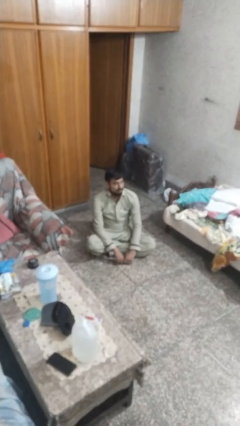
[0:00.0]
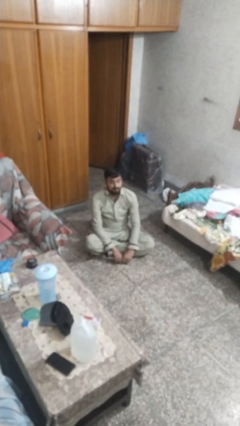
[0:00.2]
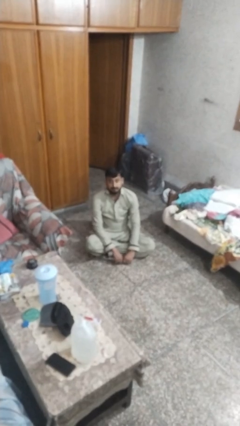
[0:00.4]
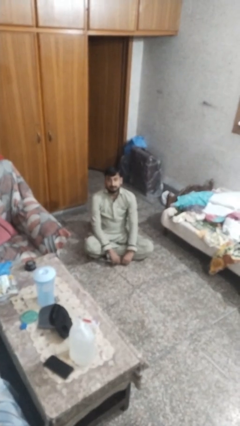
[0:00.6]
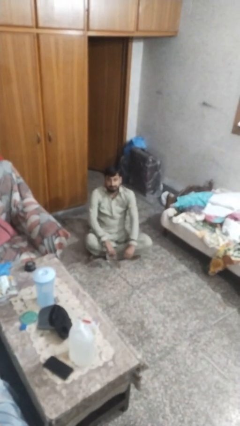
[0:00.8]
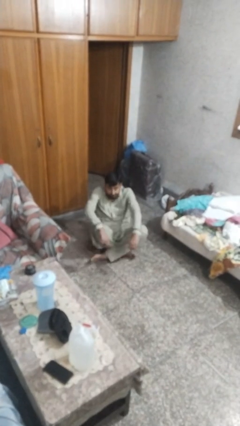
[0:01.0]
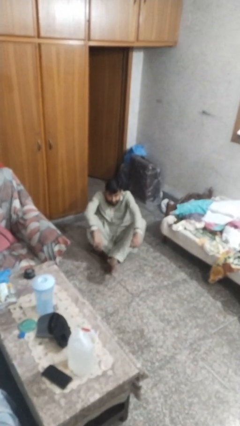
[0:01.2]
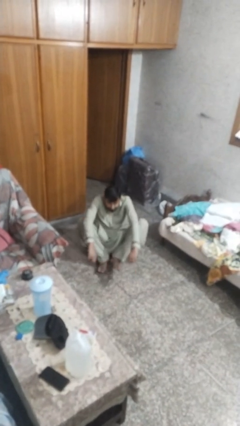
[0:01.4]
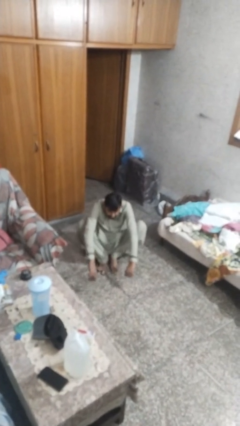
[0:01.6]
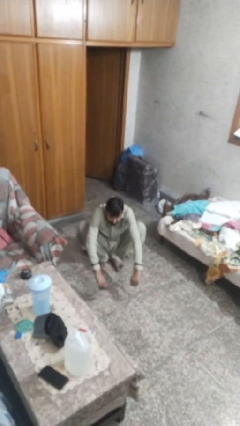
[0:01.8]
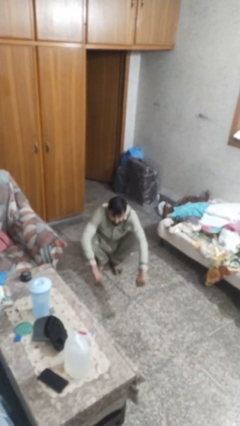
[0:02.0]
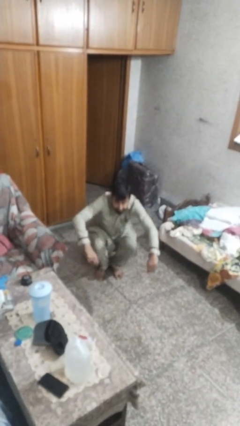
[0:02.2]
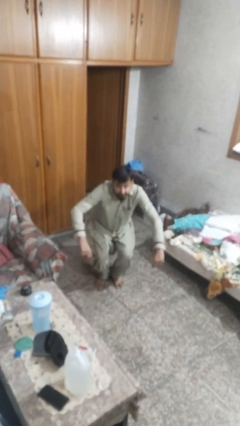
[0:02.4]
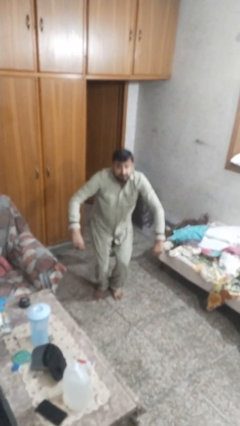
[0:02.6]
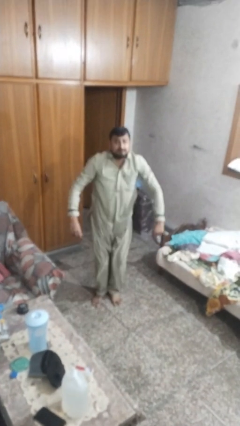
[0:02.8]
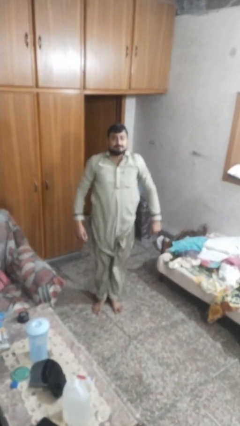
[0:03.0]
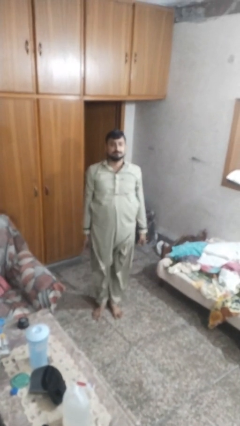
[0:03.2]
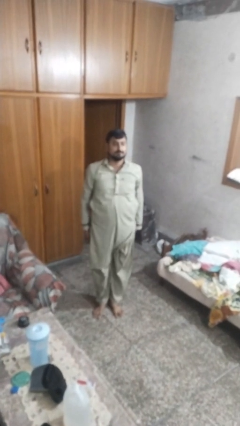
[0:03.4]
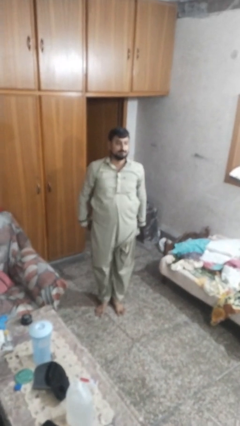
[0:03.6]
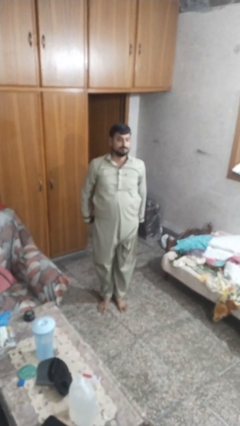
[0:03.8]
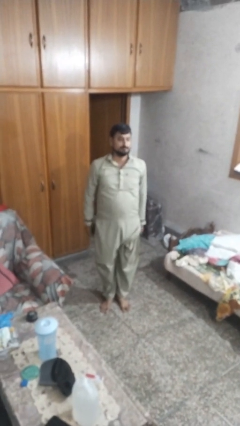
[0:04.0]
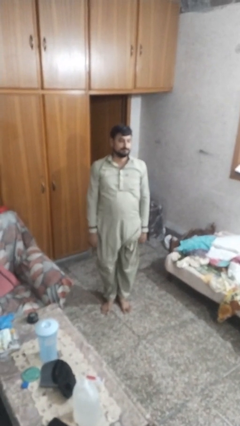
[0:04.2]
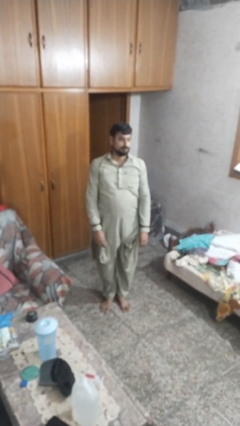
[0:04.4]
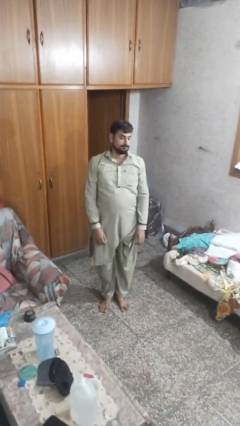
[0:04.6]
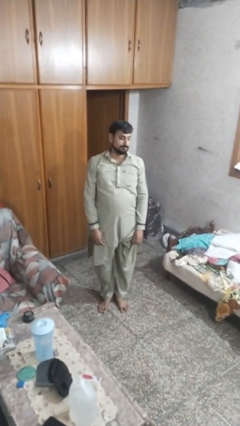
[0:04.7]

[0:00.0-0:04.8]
person stands up from floor

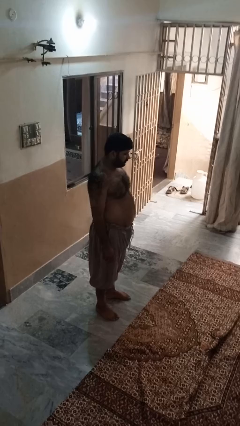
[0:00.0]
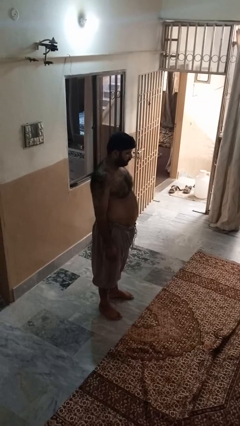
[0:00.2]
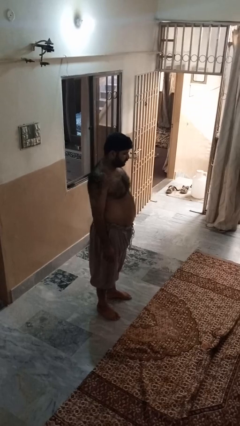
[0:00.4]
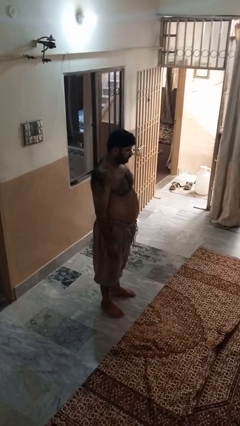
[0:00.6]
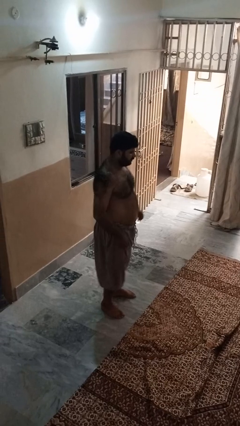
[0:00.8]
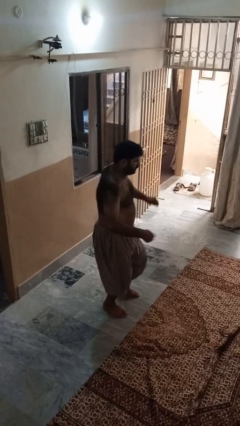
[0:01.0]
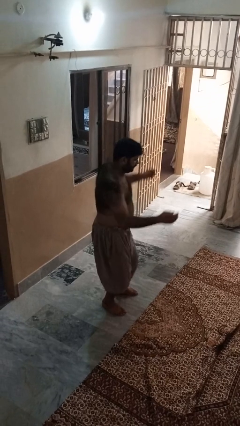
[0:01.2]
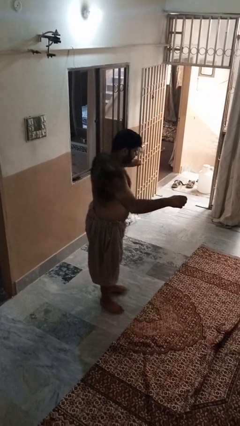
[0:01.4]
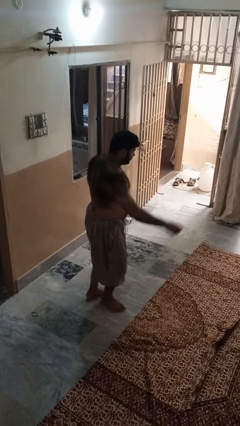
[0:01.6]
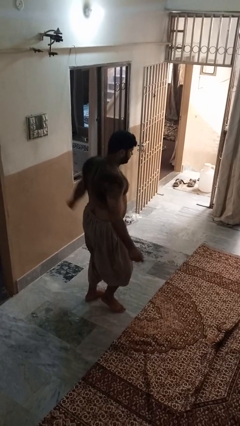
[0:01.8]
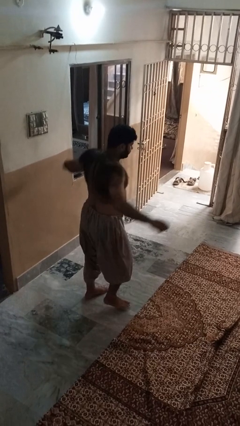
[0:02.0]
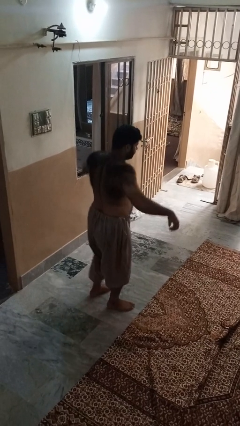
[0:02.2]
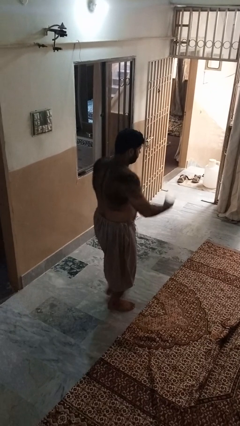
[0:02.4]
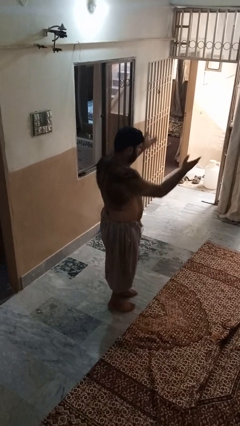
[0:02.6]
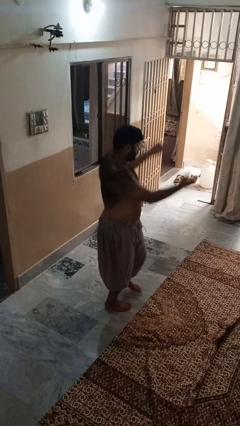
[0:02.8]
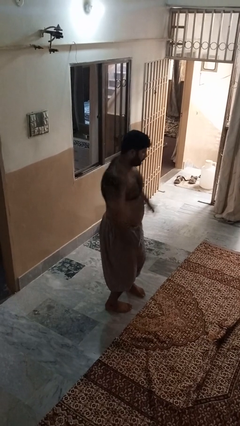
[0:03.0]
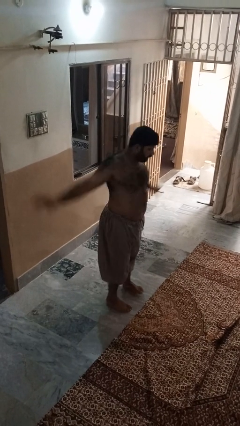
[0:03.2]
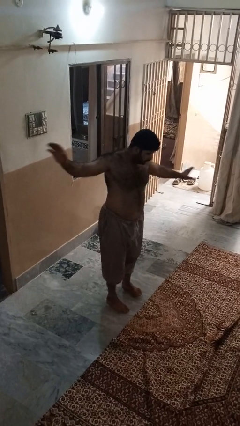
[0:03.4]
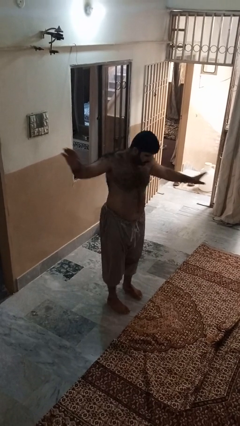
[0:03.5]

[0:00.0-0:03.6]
person dances in place

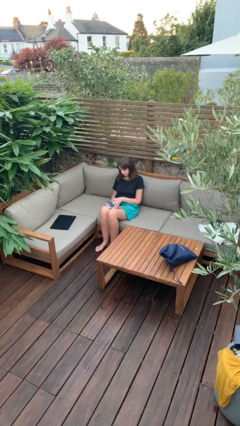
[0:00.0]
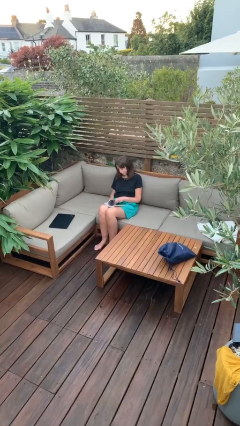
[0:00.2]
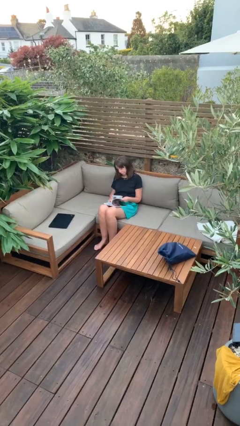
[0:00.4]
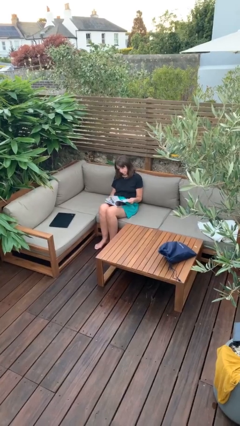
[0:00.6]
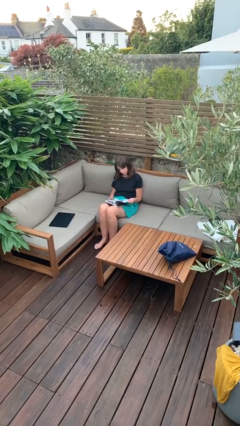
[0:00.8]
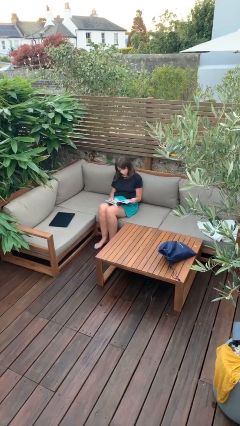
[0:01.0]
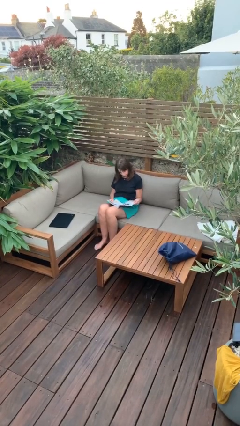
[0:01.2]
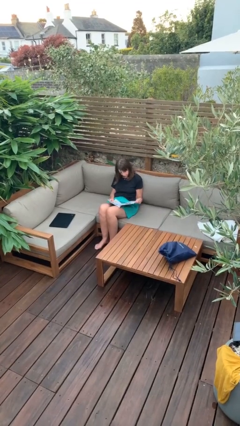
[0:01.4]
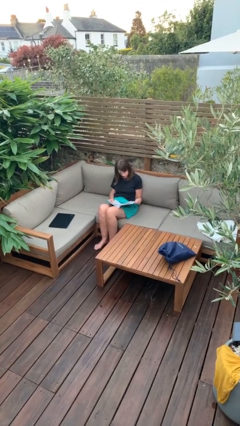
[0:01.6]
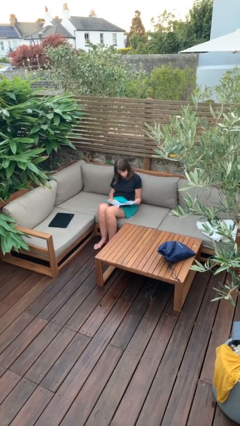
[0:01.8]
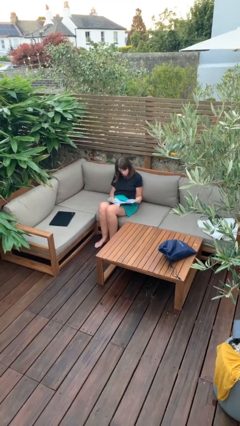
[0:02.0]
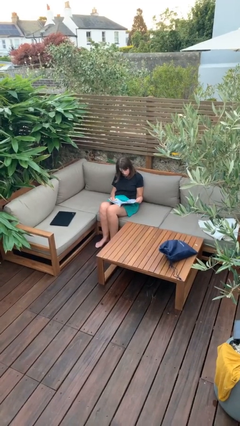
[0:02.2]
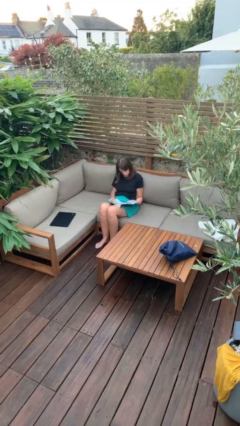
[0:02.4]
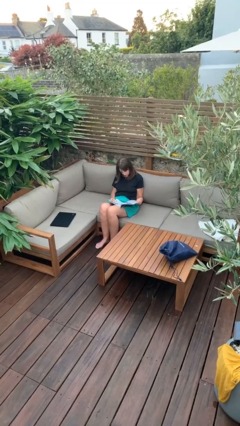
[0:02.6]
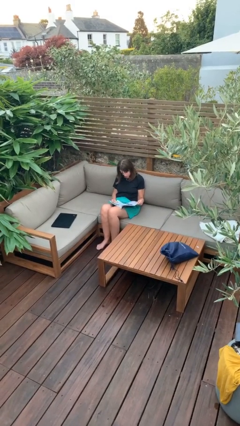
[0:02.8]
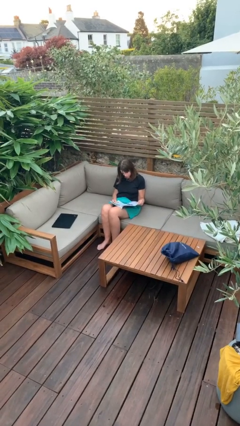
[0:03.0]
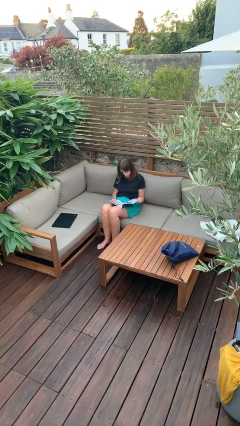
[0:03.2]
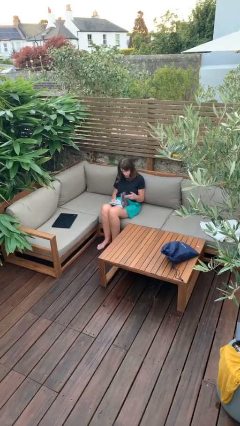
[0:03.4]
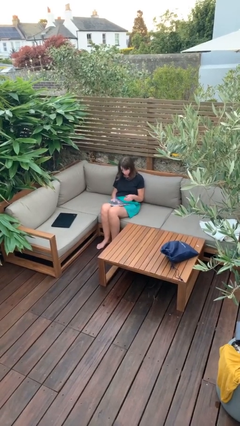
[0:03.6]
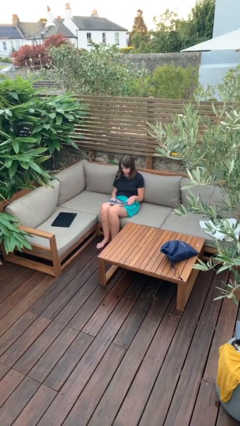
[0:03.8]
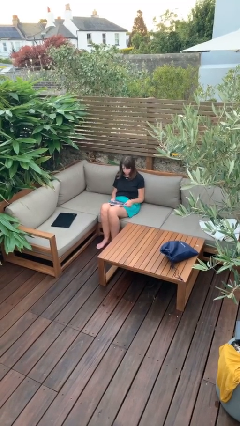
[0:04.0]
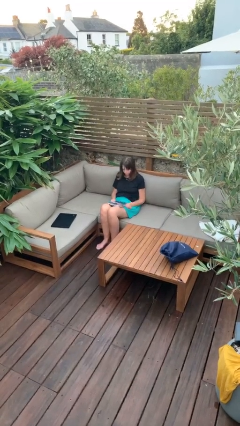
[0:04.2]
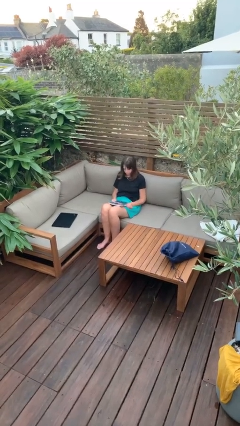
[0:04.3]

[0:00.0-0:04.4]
person reads document

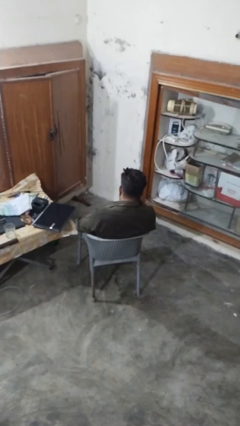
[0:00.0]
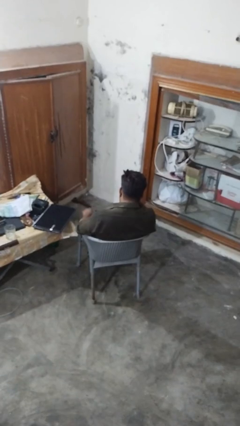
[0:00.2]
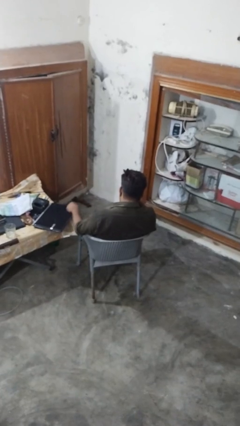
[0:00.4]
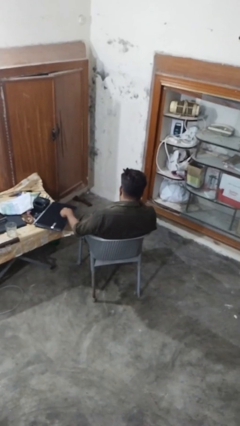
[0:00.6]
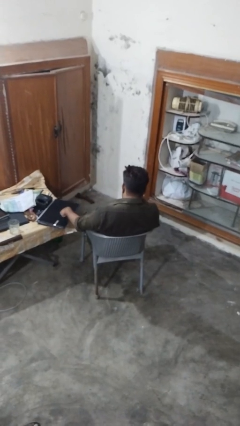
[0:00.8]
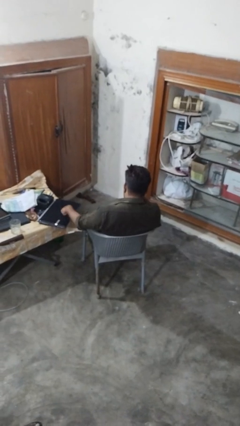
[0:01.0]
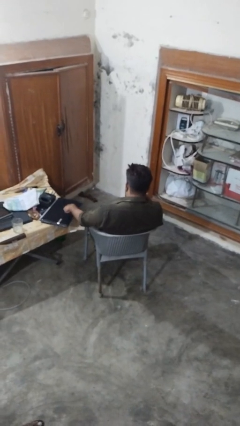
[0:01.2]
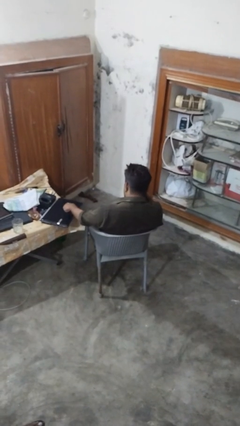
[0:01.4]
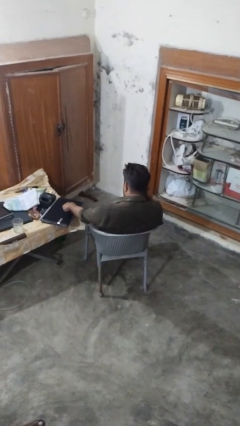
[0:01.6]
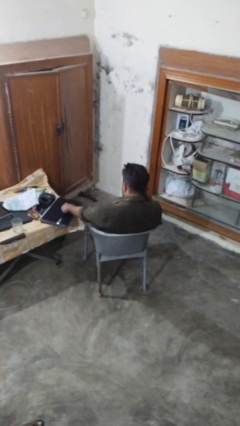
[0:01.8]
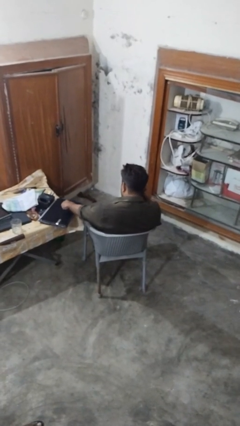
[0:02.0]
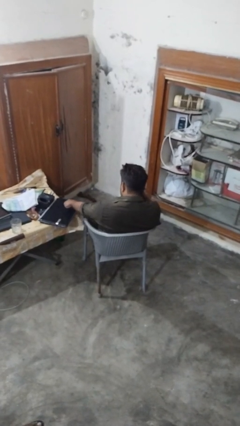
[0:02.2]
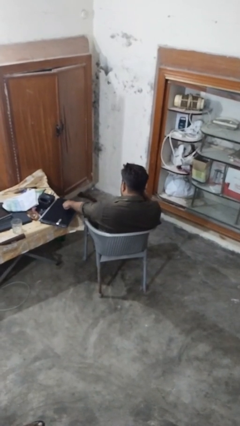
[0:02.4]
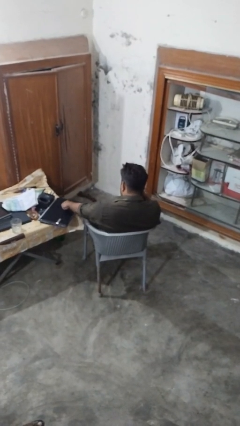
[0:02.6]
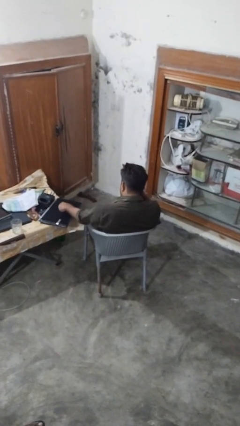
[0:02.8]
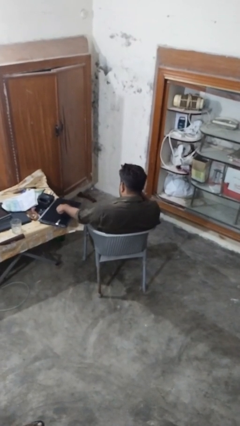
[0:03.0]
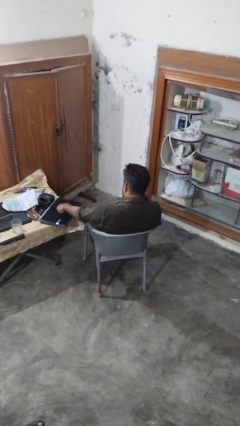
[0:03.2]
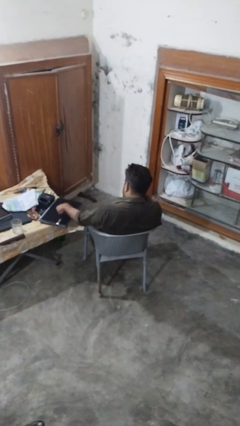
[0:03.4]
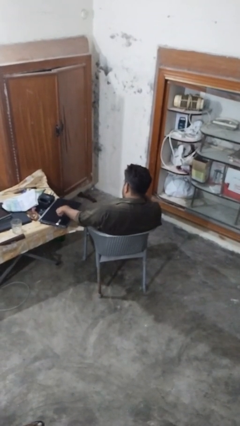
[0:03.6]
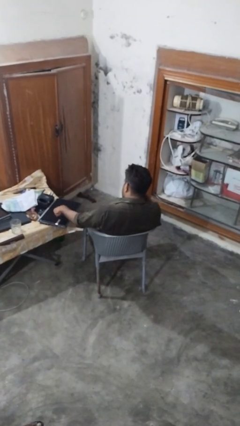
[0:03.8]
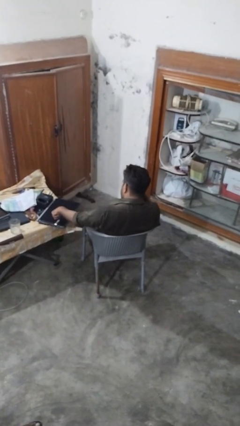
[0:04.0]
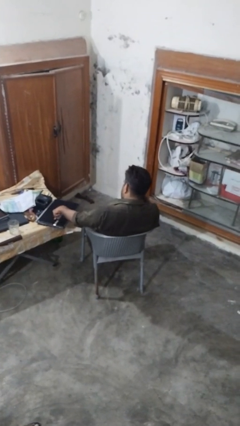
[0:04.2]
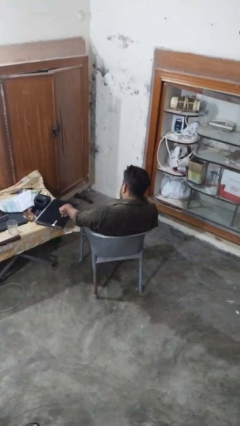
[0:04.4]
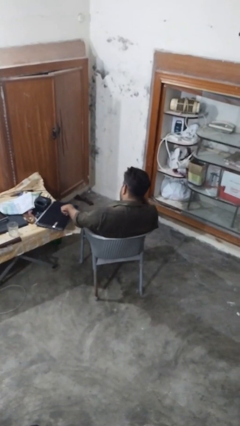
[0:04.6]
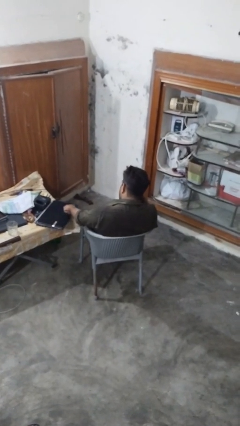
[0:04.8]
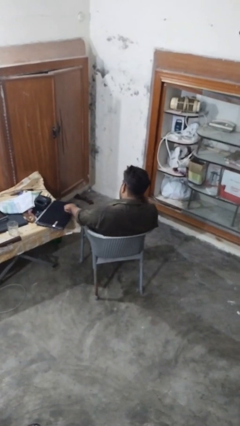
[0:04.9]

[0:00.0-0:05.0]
person taps object with finger
